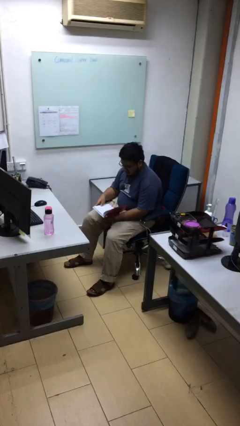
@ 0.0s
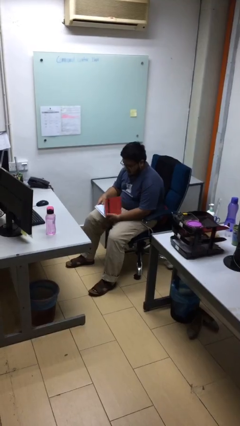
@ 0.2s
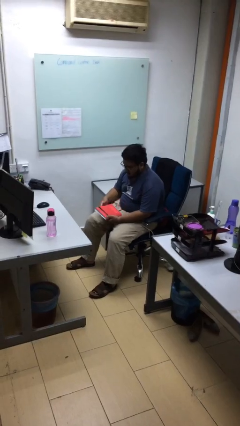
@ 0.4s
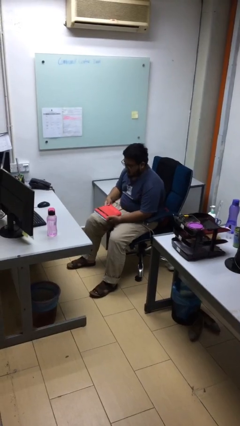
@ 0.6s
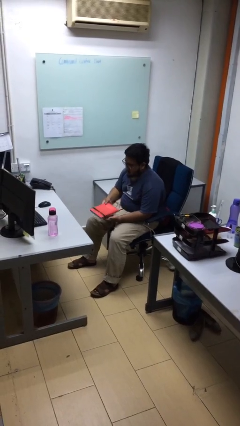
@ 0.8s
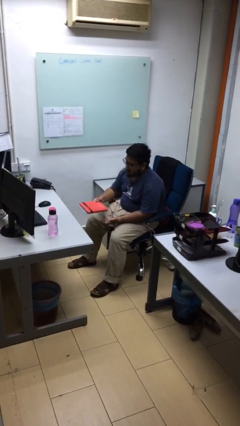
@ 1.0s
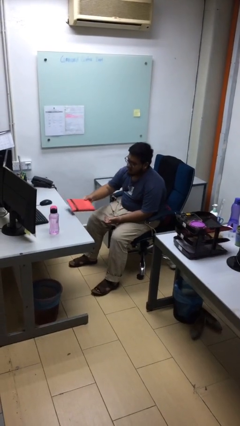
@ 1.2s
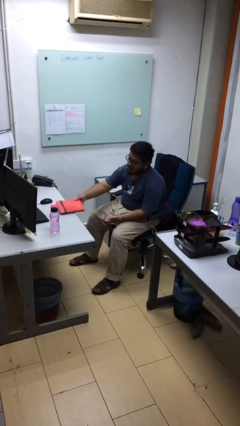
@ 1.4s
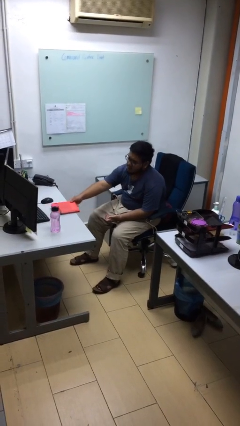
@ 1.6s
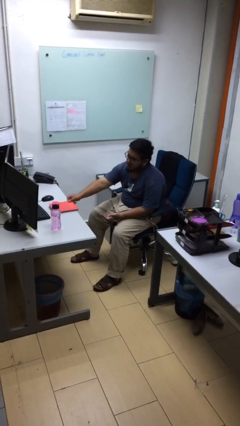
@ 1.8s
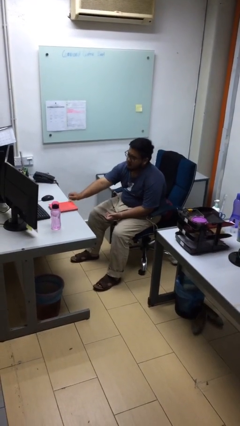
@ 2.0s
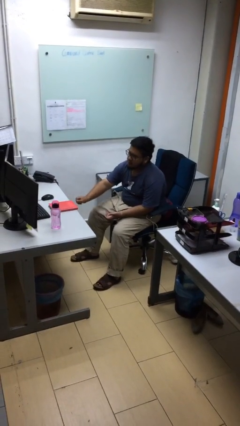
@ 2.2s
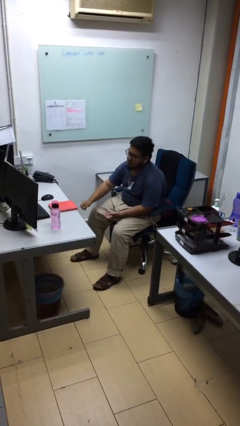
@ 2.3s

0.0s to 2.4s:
person puts down object on table

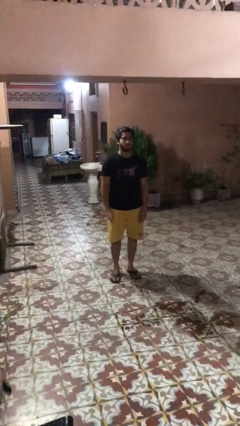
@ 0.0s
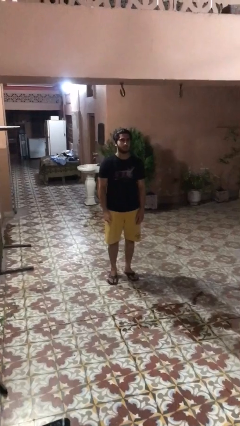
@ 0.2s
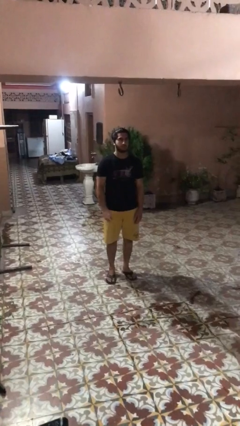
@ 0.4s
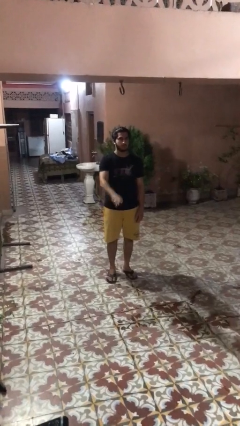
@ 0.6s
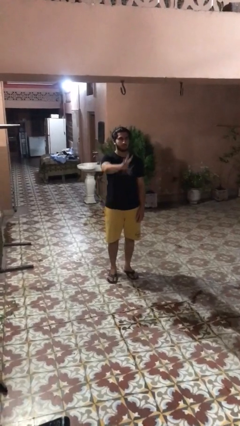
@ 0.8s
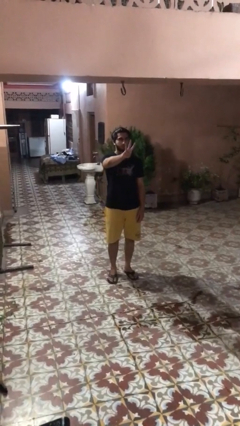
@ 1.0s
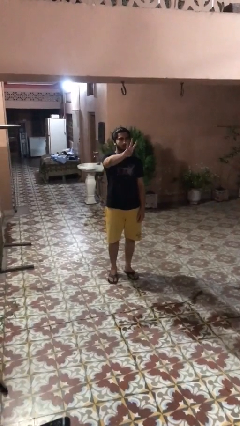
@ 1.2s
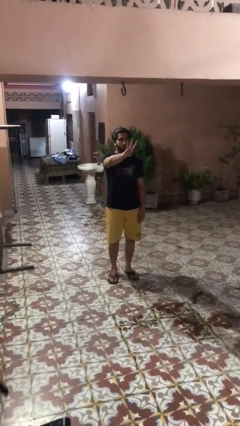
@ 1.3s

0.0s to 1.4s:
person gestures number three

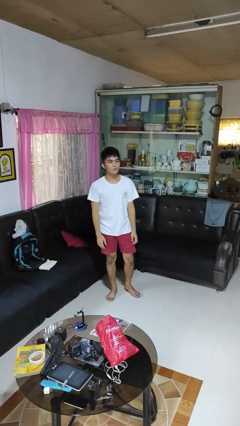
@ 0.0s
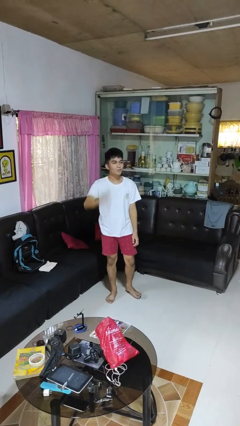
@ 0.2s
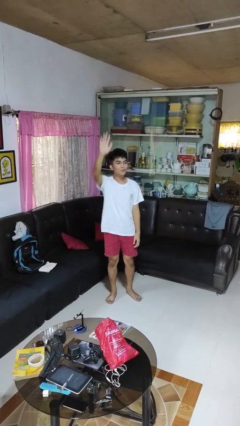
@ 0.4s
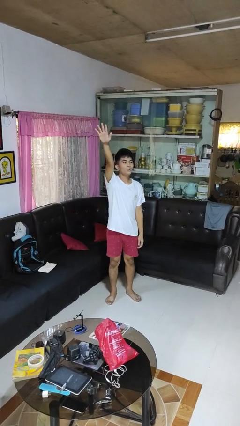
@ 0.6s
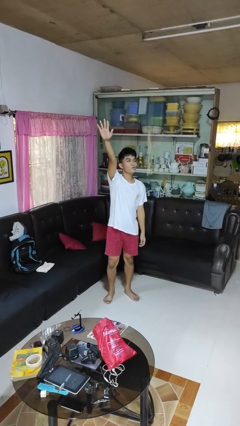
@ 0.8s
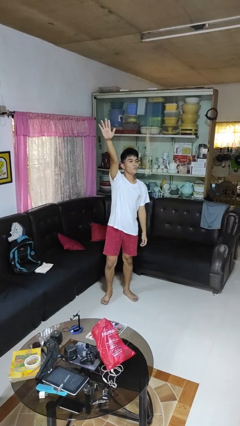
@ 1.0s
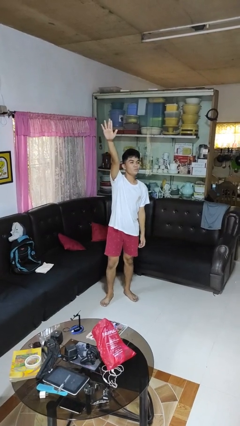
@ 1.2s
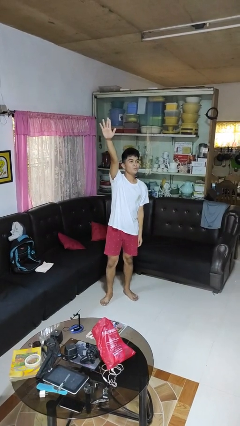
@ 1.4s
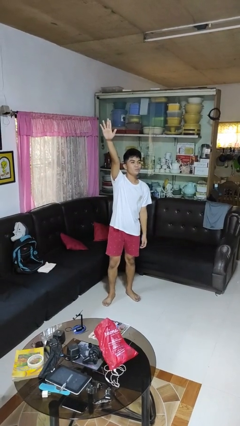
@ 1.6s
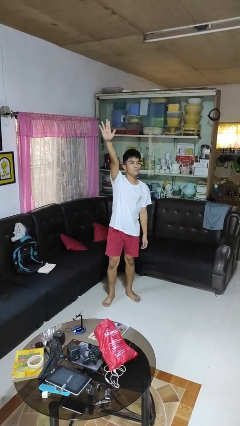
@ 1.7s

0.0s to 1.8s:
person gestures raise hand

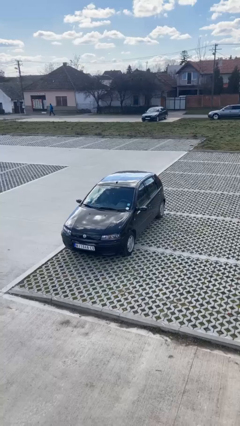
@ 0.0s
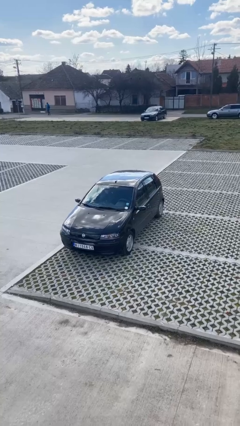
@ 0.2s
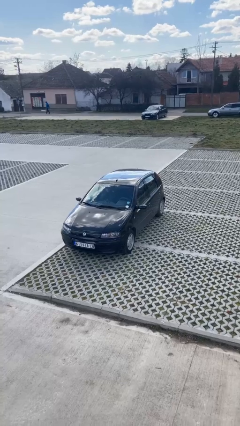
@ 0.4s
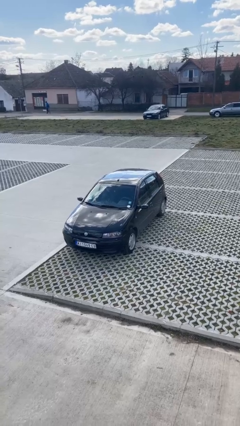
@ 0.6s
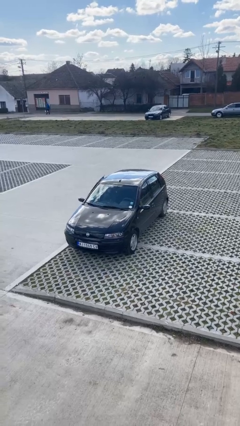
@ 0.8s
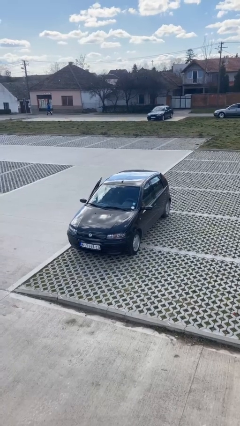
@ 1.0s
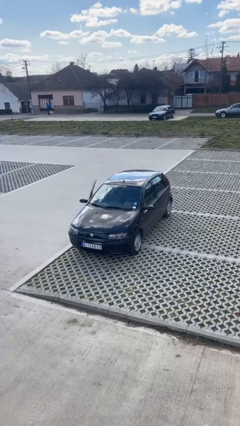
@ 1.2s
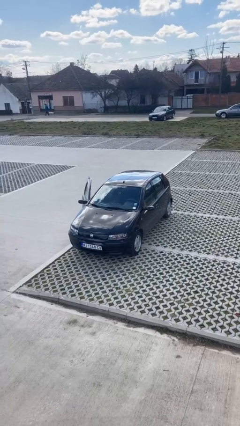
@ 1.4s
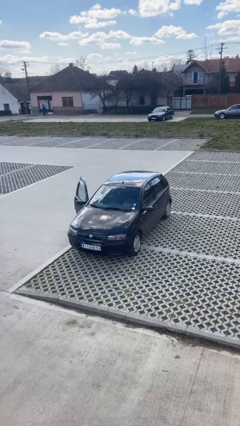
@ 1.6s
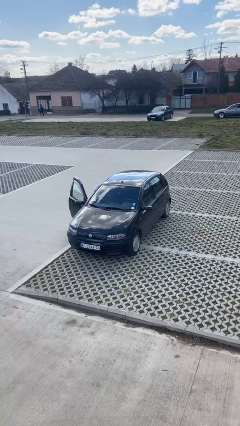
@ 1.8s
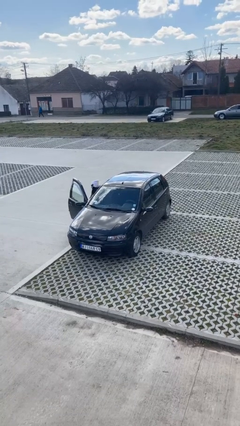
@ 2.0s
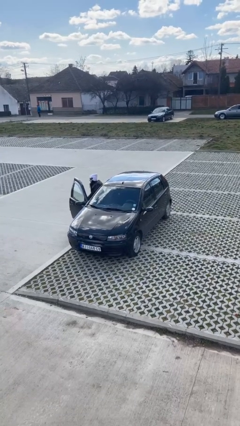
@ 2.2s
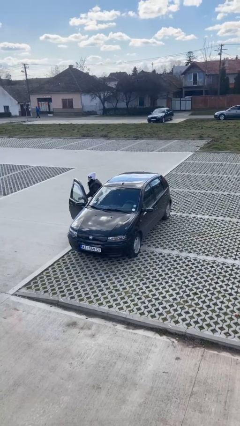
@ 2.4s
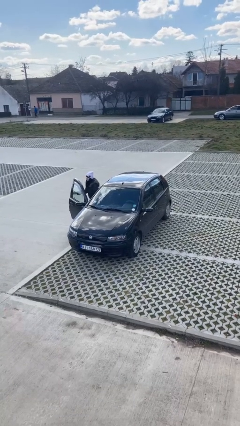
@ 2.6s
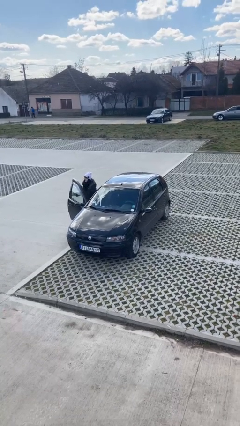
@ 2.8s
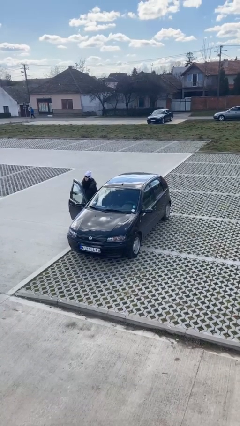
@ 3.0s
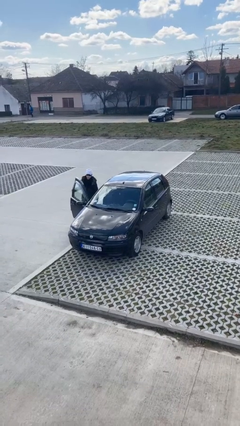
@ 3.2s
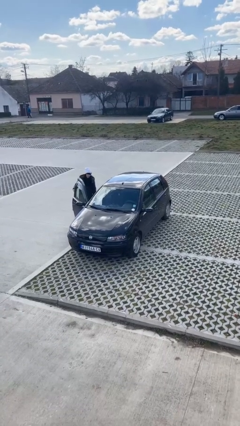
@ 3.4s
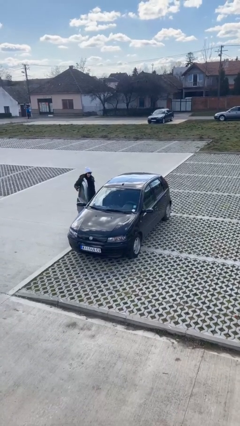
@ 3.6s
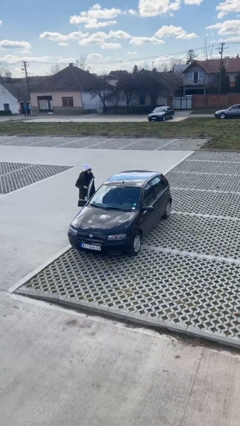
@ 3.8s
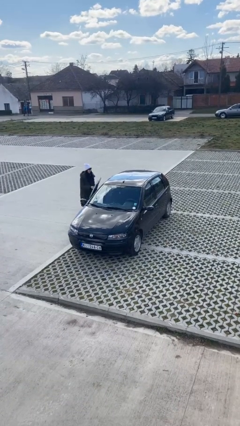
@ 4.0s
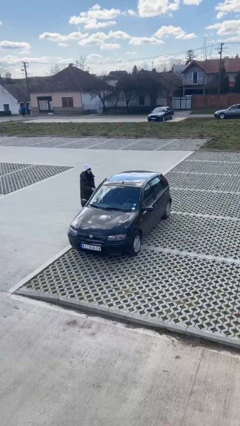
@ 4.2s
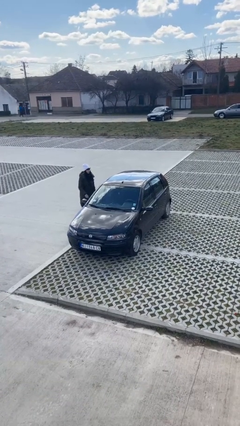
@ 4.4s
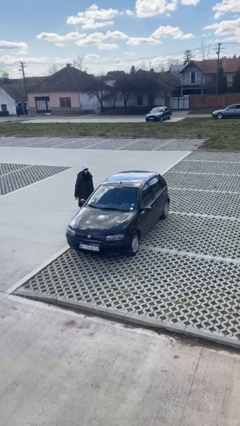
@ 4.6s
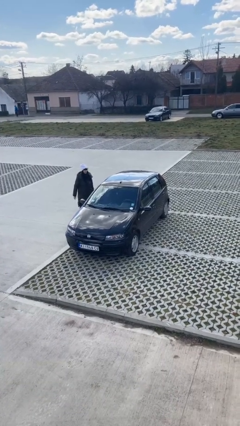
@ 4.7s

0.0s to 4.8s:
car drops off person

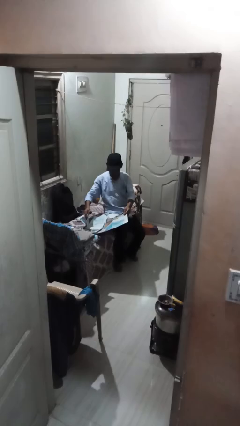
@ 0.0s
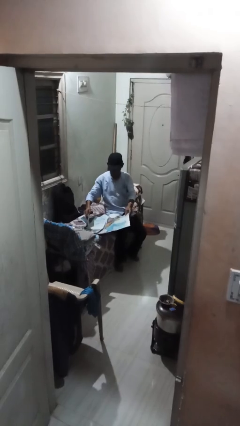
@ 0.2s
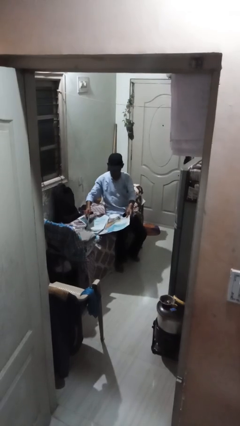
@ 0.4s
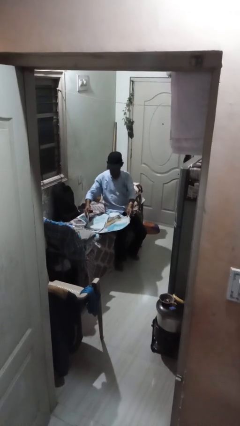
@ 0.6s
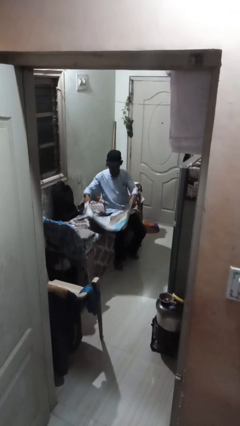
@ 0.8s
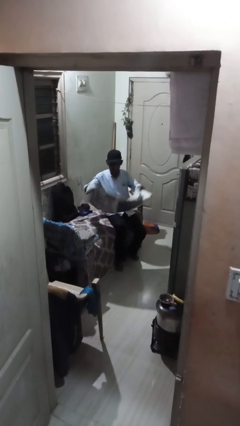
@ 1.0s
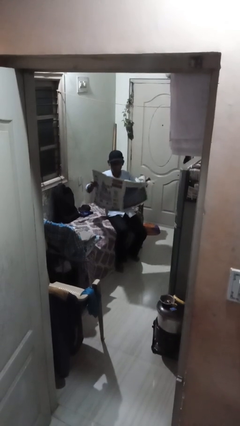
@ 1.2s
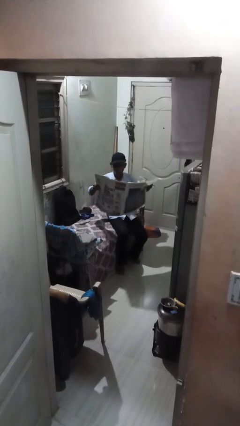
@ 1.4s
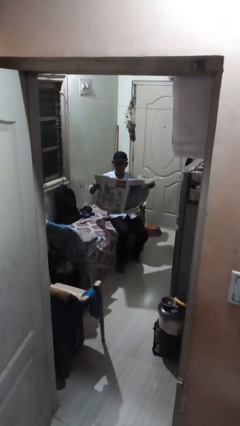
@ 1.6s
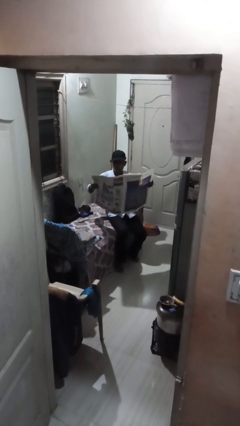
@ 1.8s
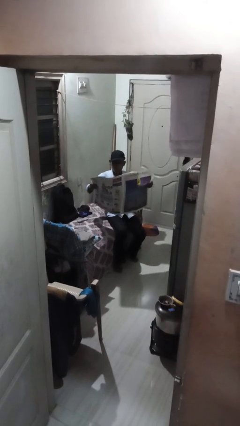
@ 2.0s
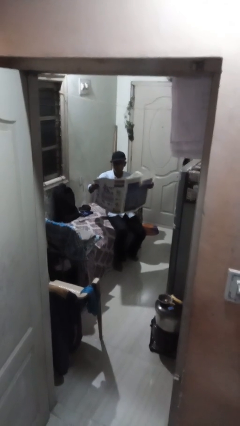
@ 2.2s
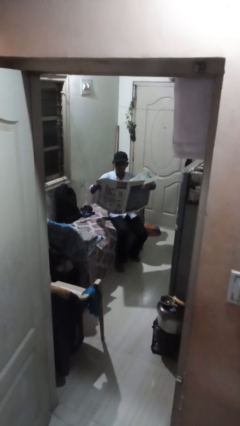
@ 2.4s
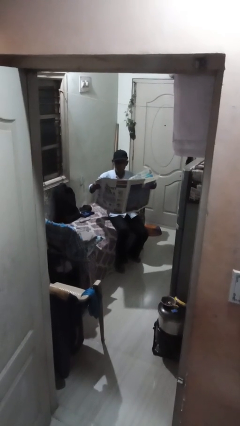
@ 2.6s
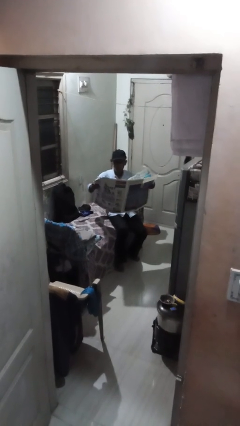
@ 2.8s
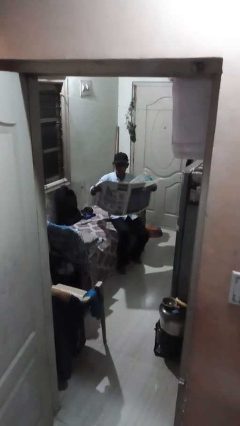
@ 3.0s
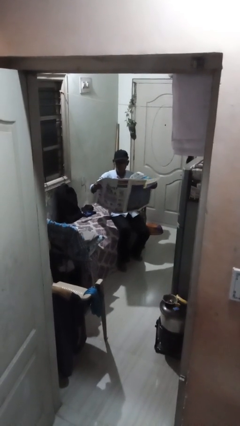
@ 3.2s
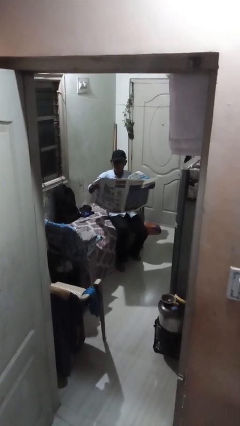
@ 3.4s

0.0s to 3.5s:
person reads newspaper

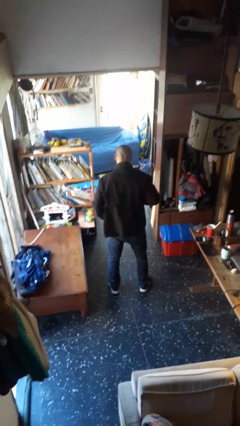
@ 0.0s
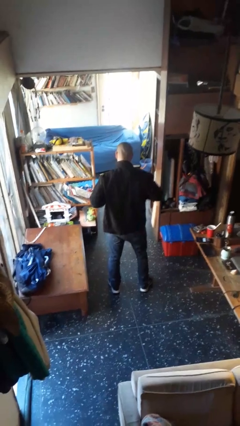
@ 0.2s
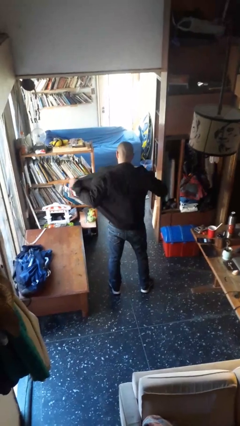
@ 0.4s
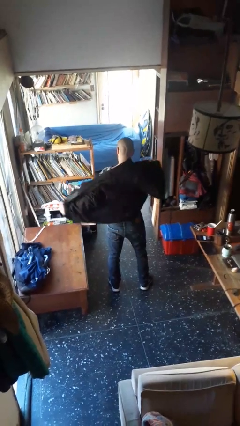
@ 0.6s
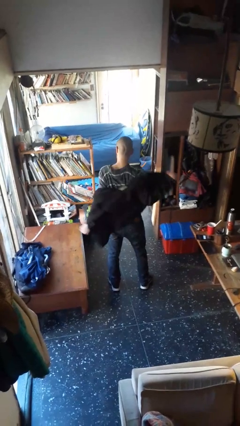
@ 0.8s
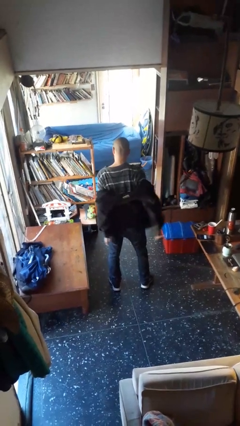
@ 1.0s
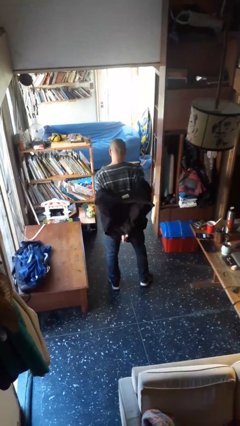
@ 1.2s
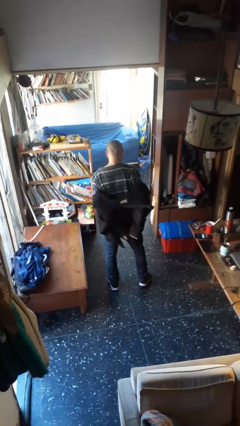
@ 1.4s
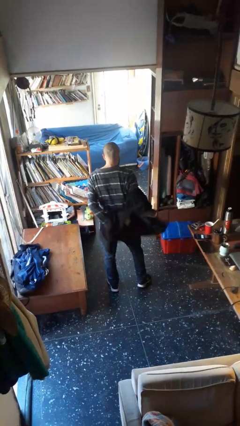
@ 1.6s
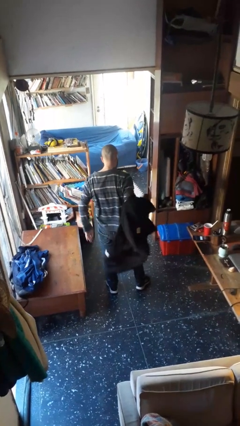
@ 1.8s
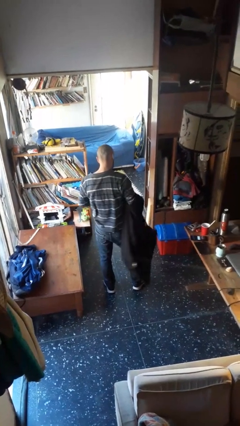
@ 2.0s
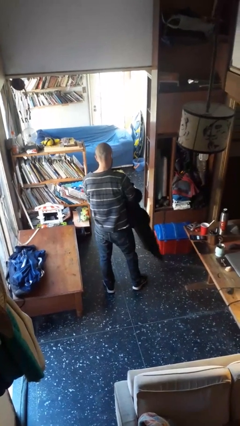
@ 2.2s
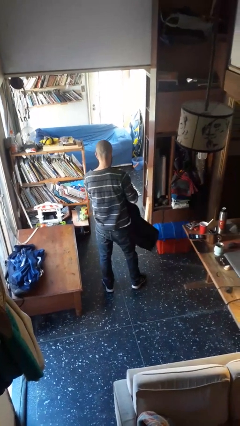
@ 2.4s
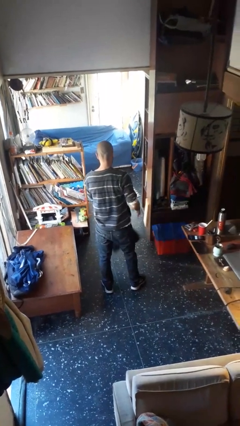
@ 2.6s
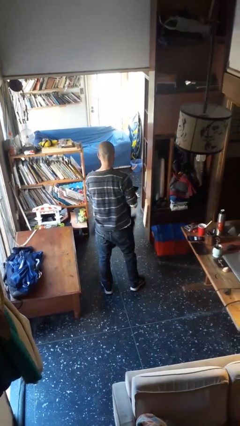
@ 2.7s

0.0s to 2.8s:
person takes off jacket

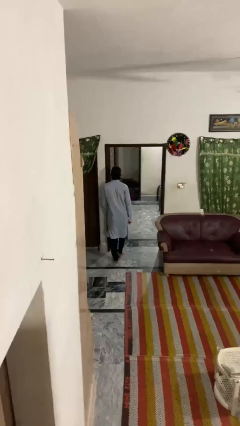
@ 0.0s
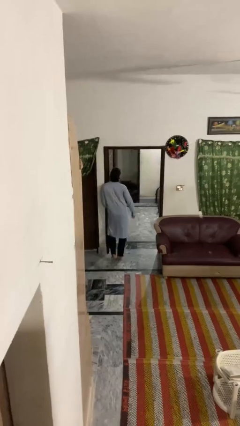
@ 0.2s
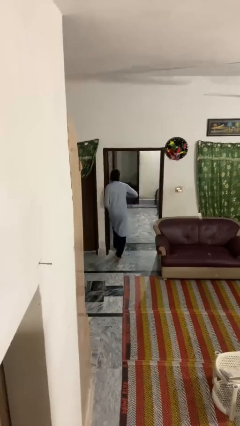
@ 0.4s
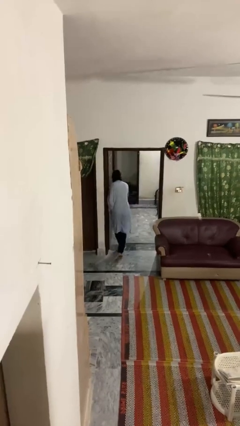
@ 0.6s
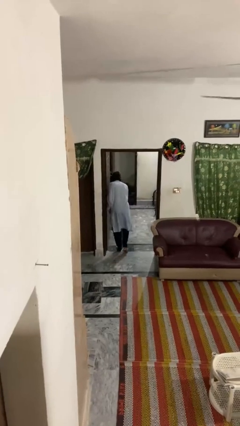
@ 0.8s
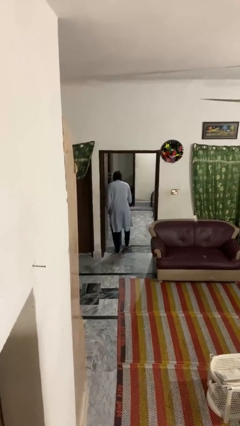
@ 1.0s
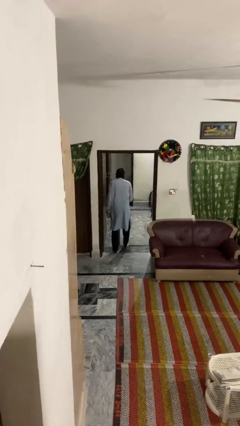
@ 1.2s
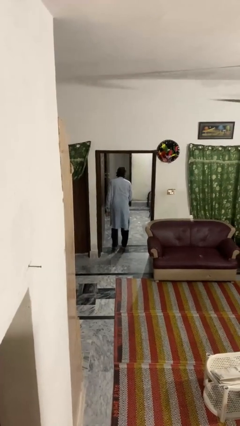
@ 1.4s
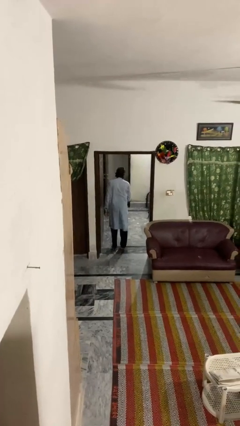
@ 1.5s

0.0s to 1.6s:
person bumps into wall
